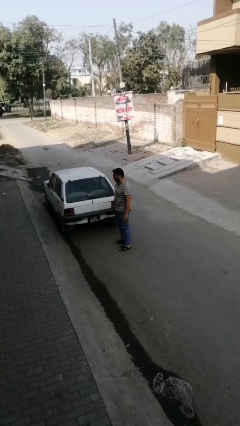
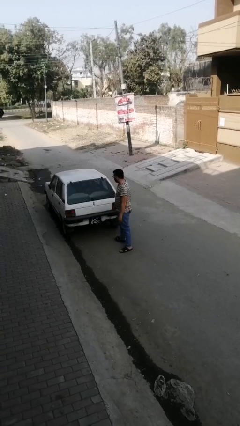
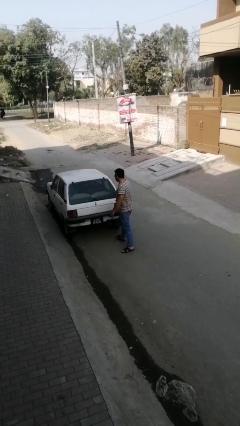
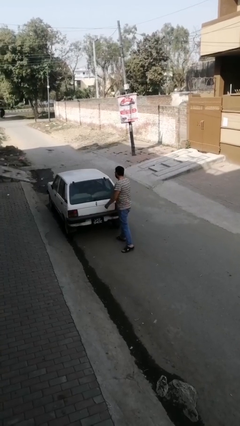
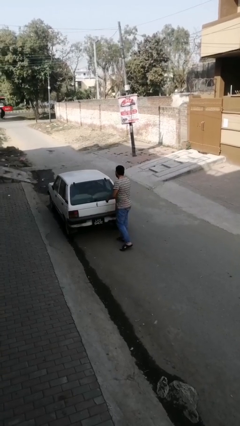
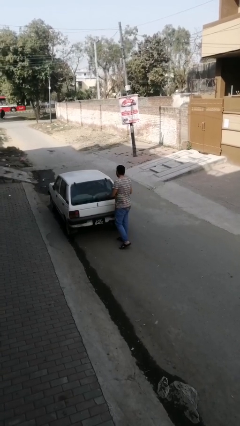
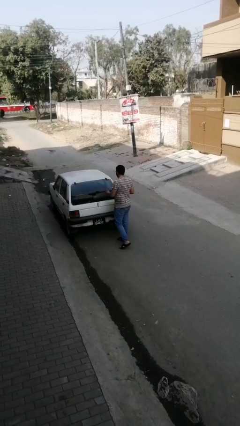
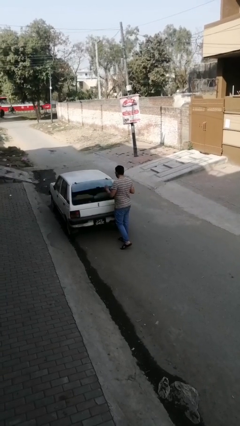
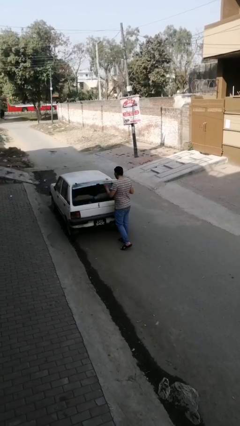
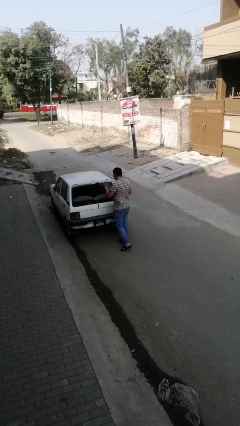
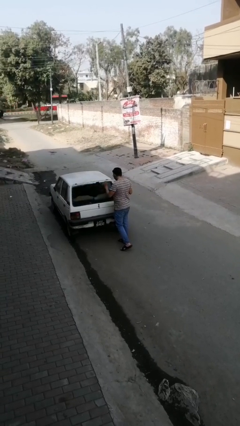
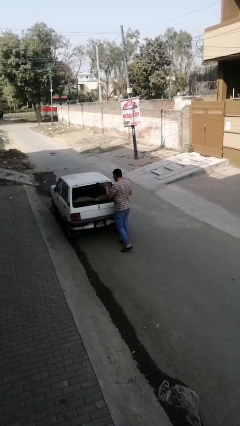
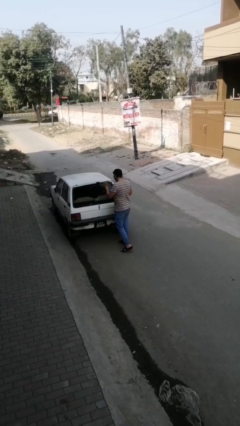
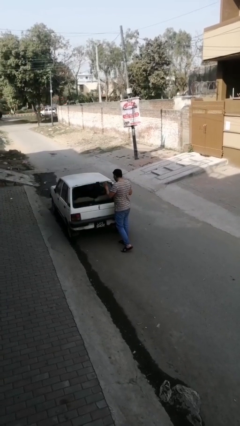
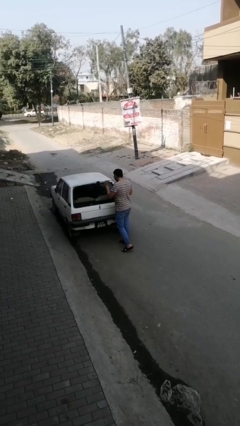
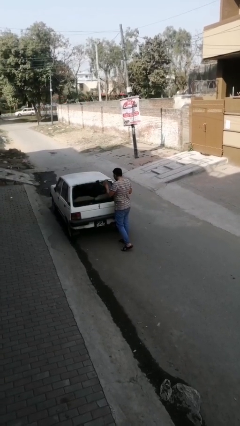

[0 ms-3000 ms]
person opens car trunk

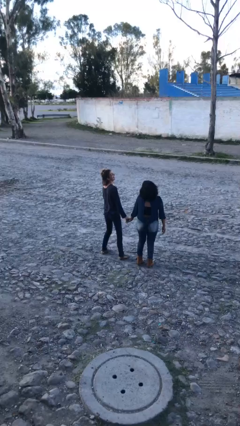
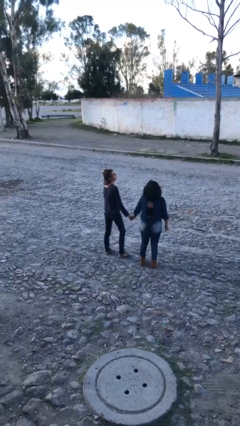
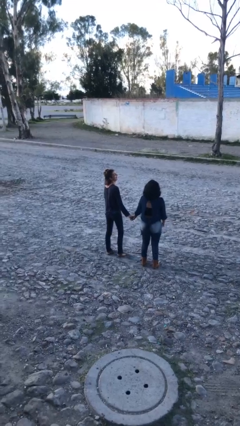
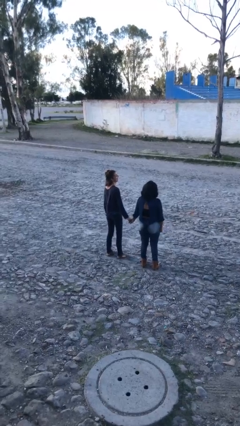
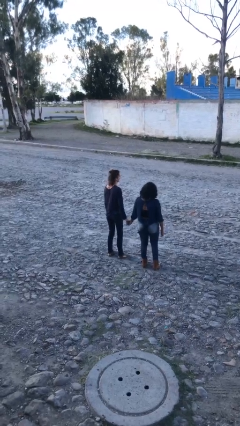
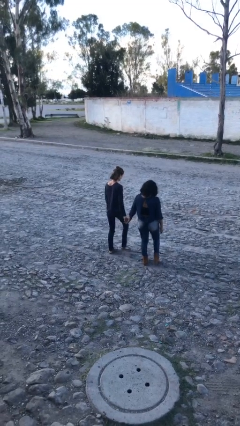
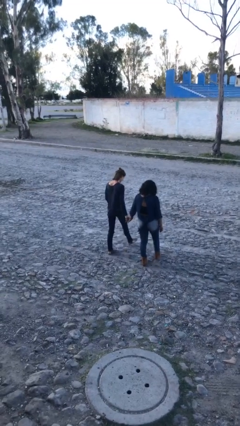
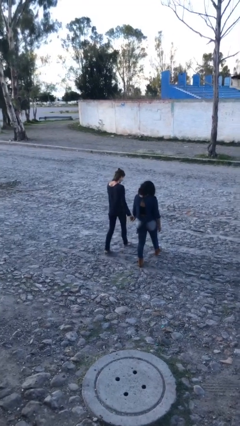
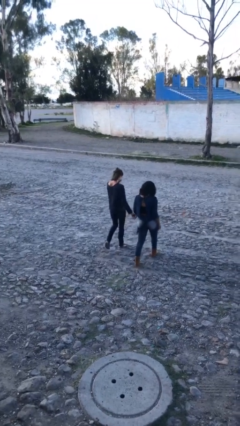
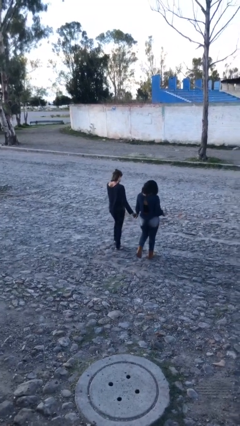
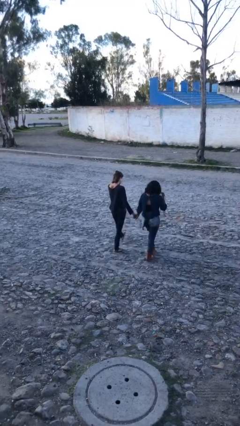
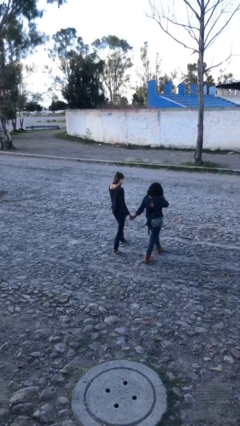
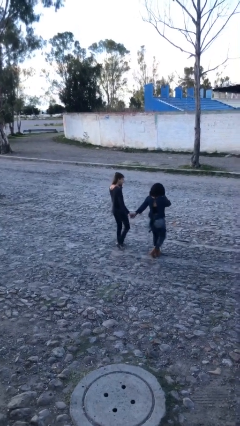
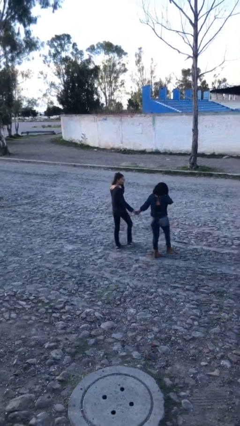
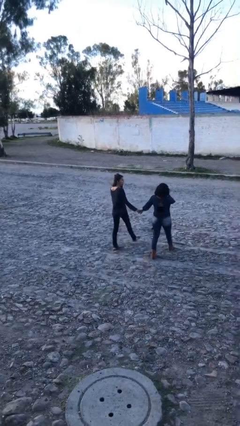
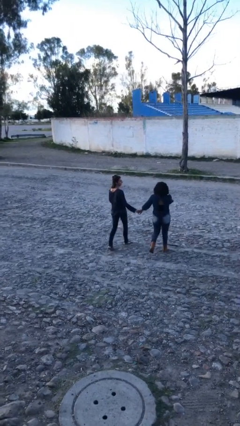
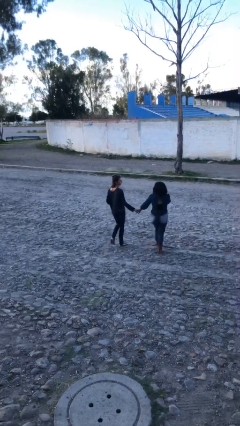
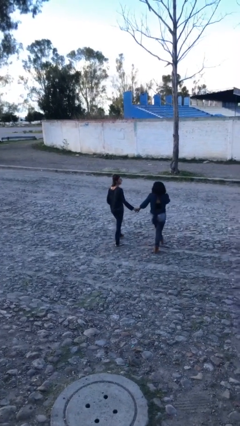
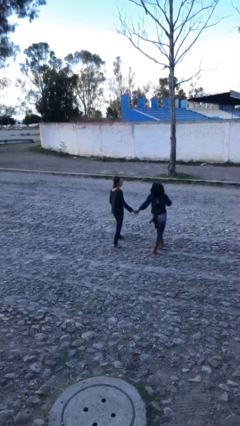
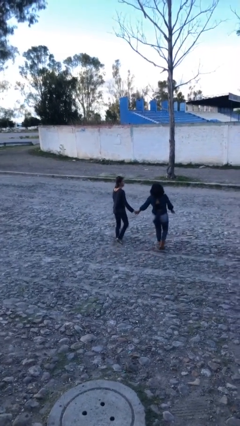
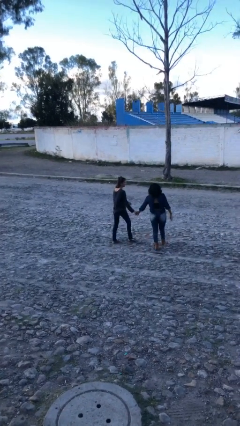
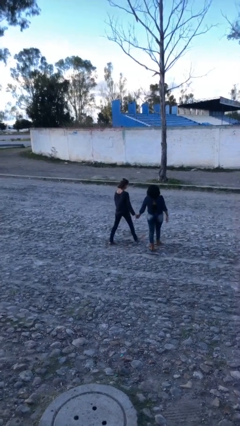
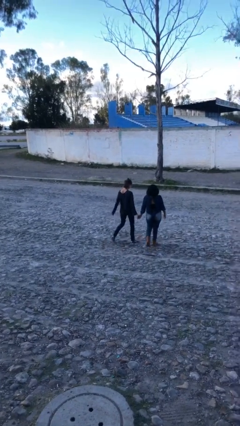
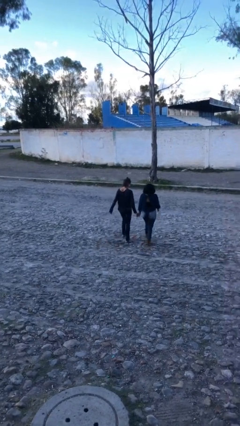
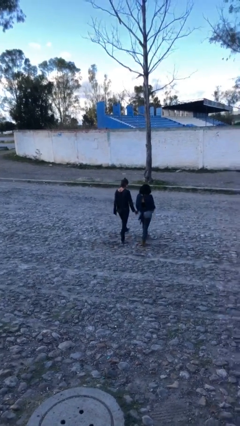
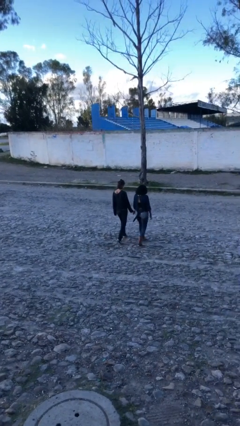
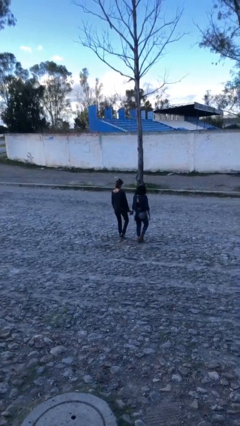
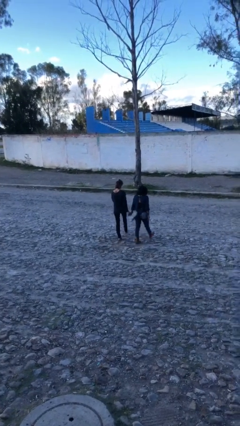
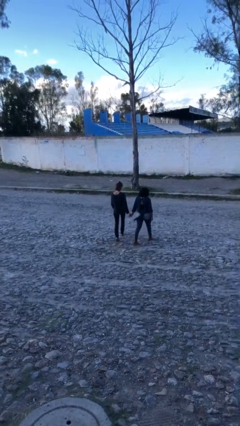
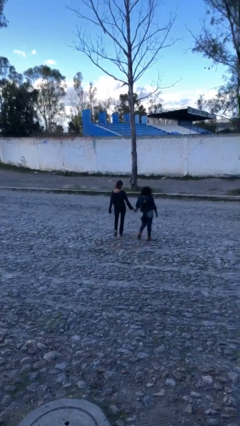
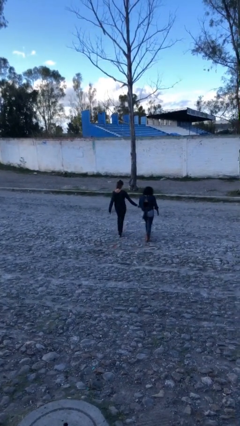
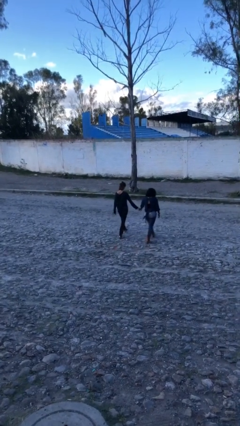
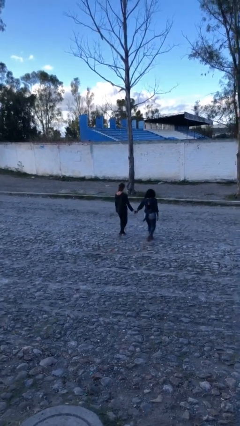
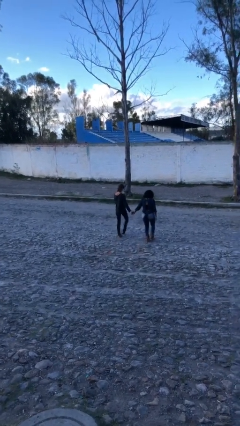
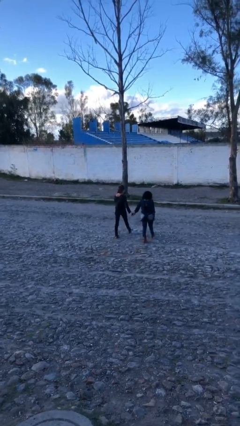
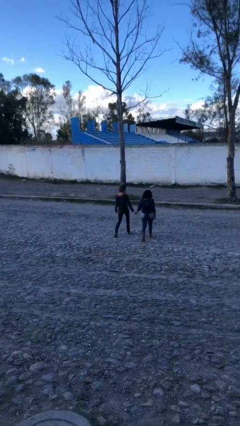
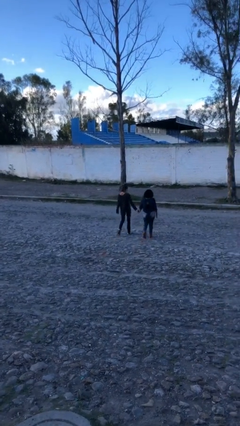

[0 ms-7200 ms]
person holds hand

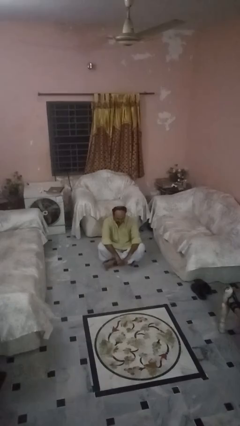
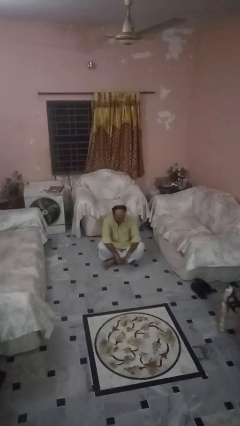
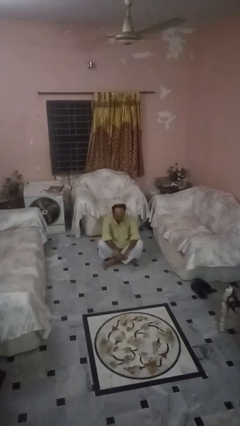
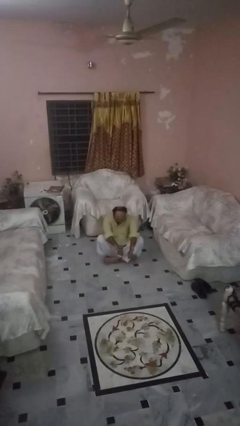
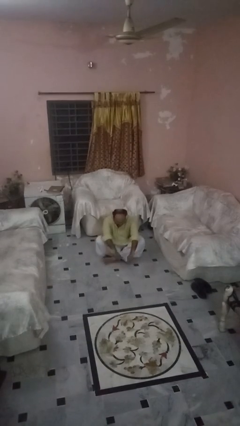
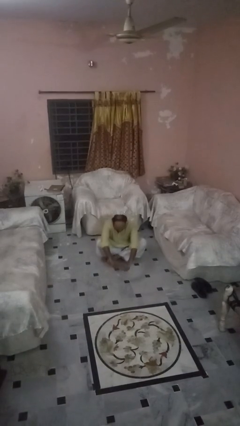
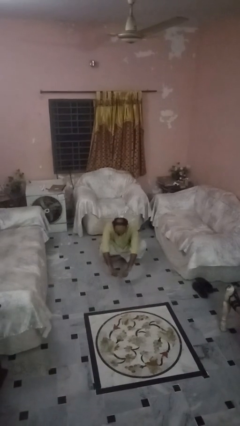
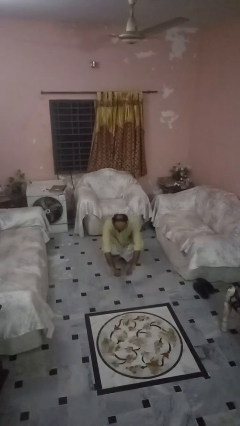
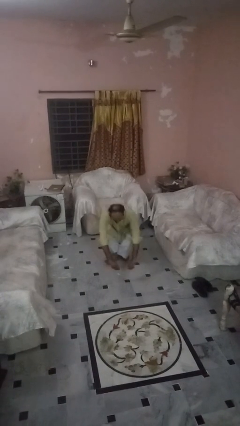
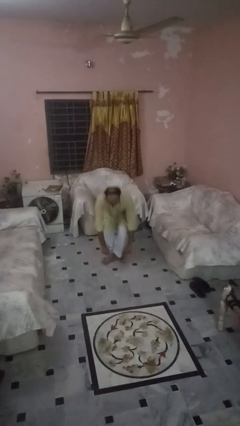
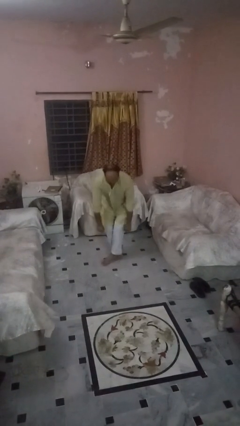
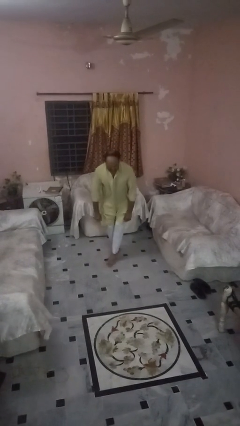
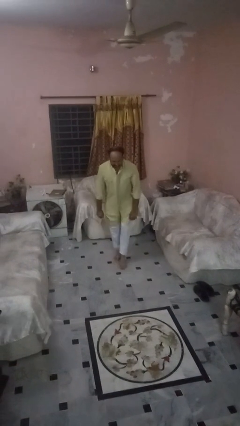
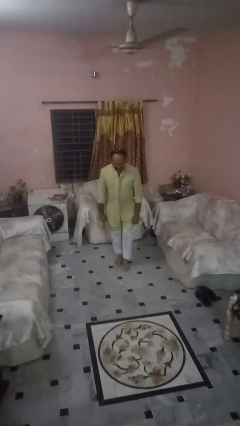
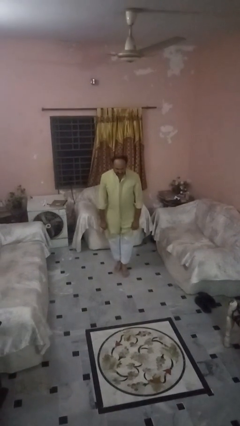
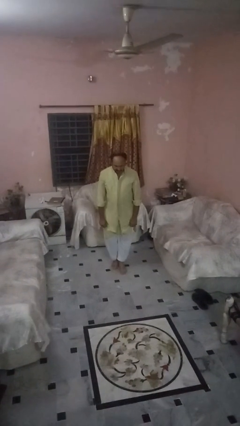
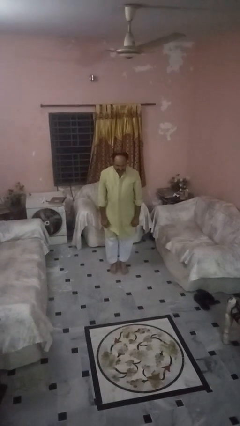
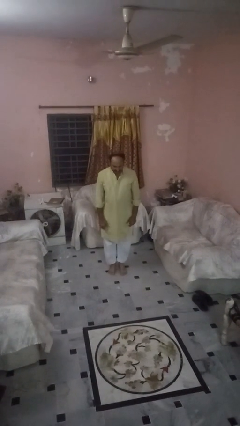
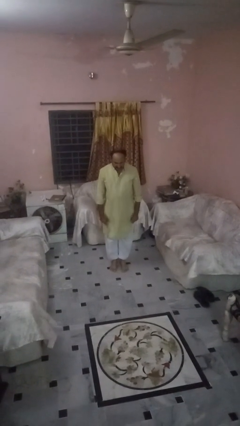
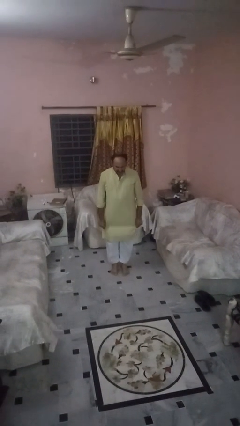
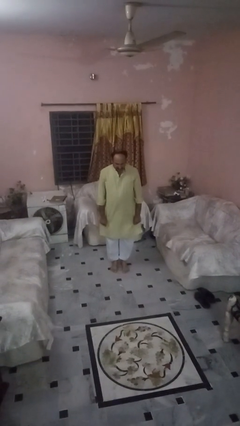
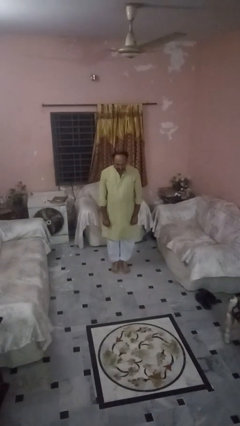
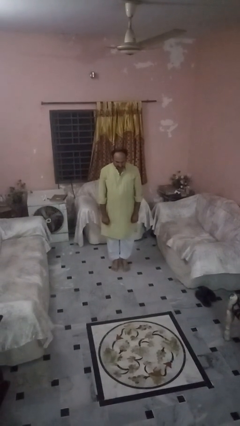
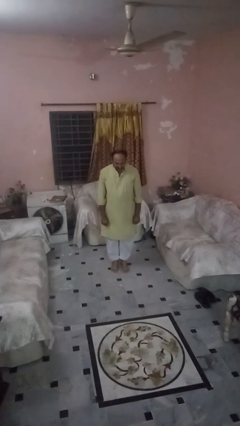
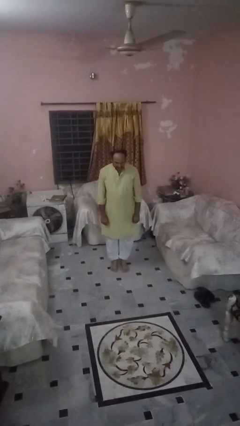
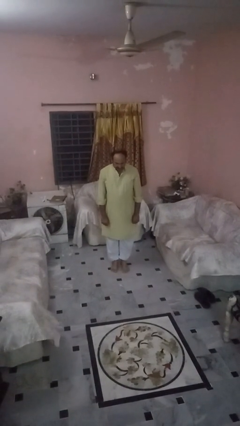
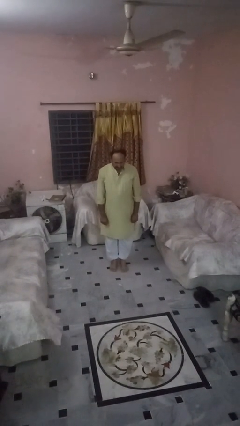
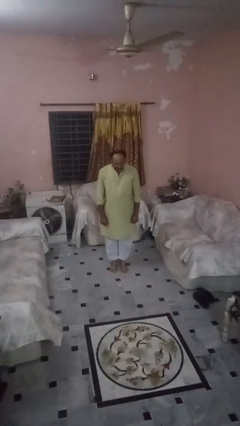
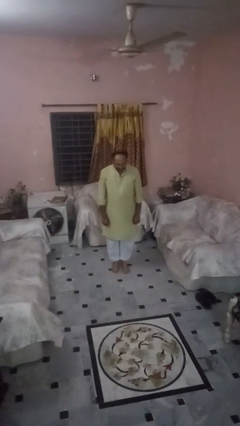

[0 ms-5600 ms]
person stands up from floor

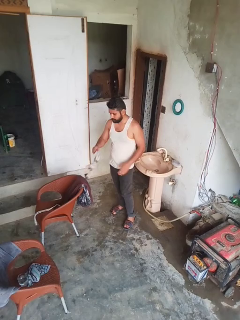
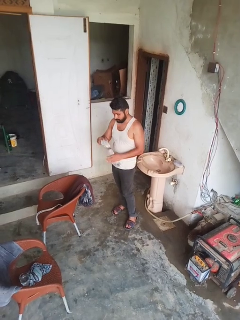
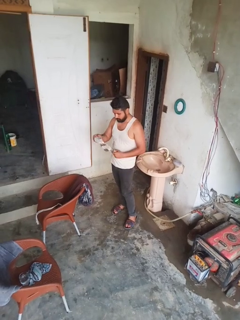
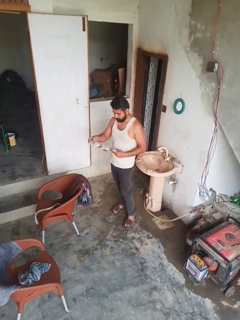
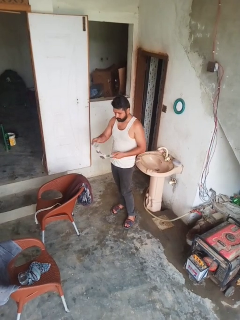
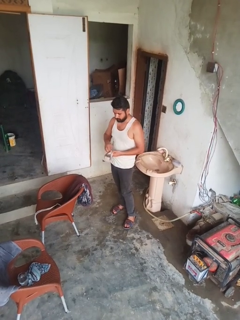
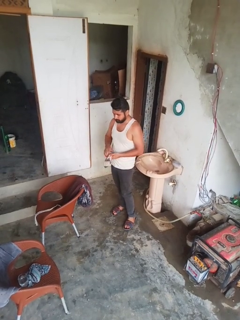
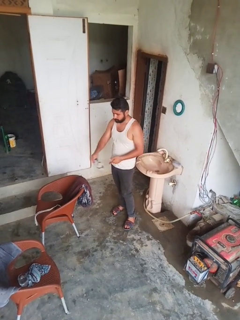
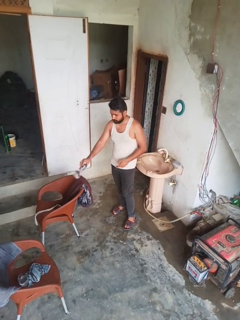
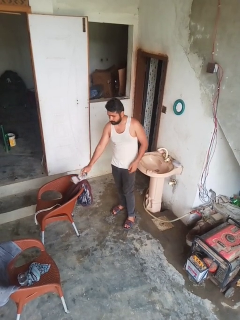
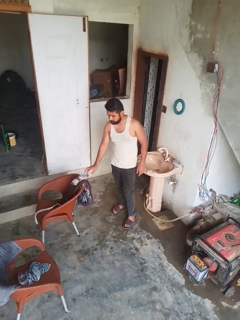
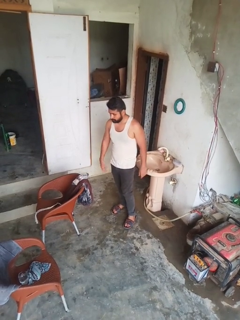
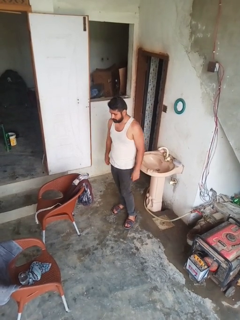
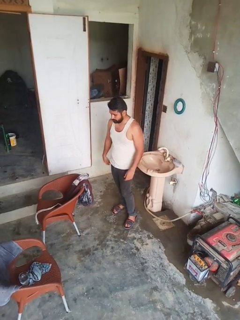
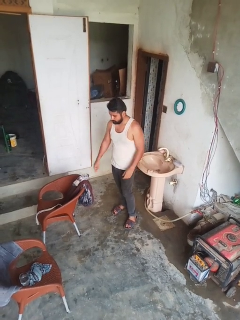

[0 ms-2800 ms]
person folds socks
